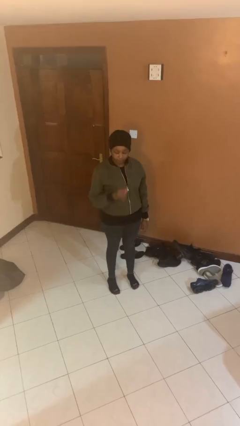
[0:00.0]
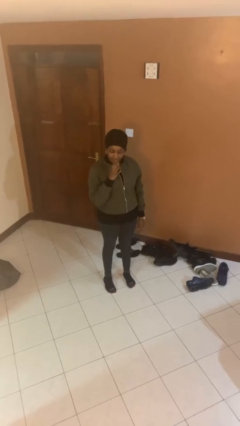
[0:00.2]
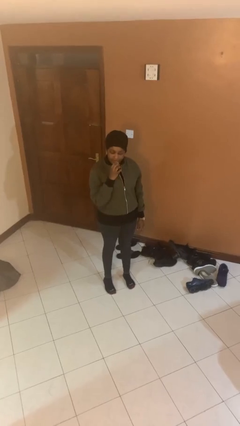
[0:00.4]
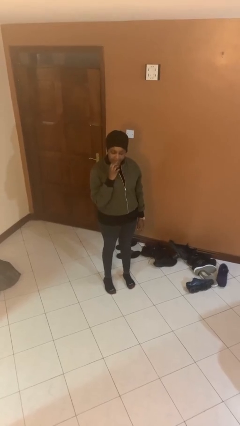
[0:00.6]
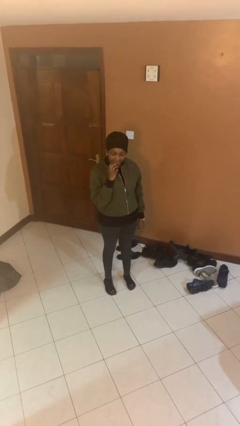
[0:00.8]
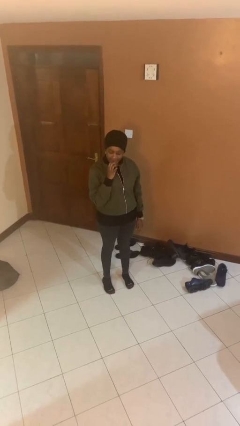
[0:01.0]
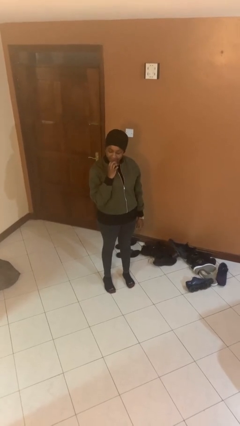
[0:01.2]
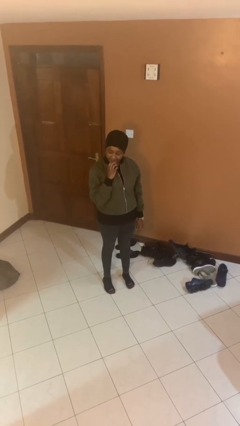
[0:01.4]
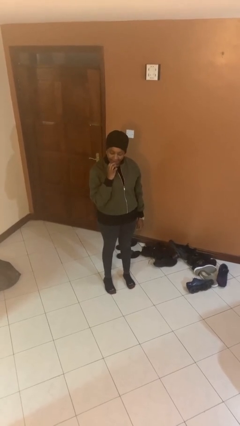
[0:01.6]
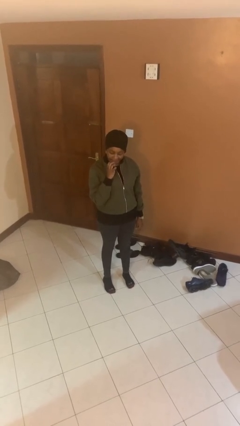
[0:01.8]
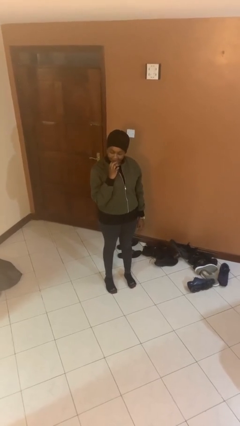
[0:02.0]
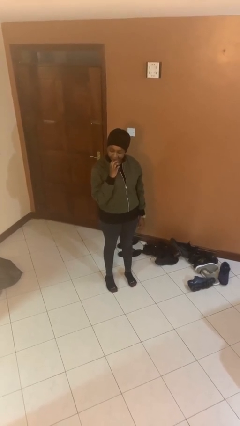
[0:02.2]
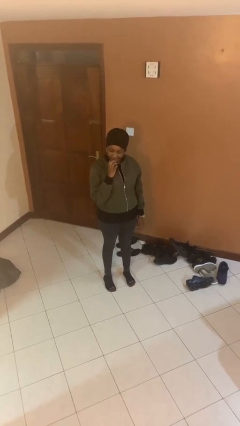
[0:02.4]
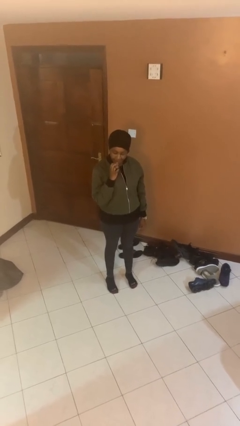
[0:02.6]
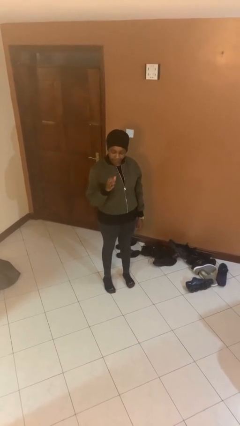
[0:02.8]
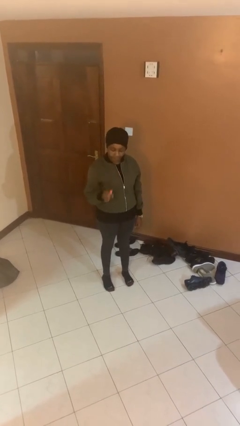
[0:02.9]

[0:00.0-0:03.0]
person applies lip makeup

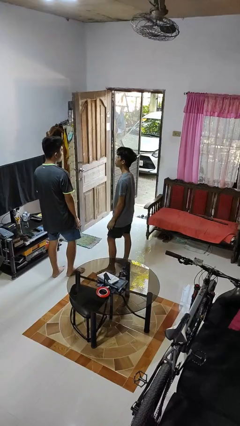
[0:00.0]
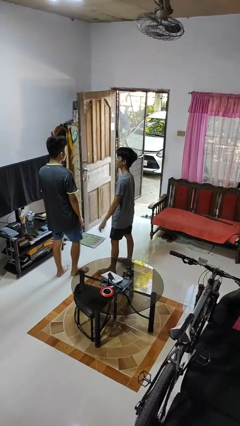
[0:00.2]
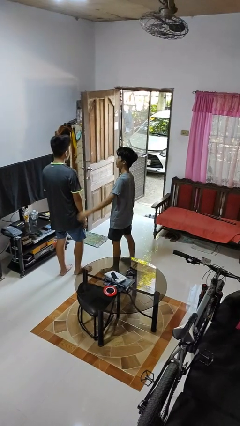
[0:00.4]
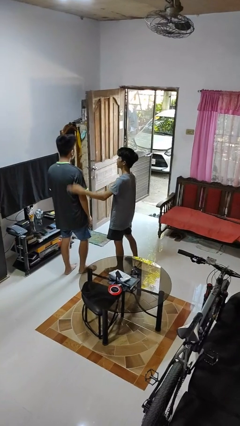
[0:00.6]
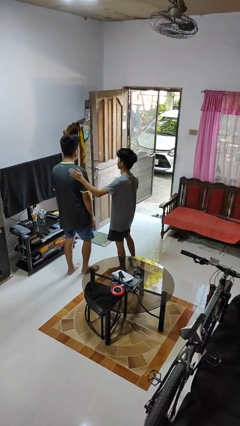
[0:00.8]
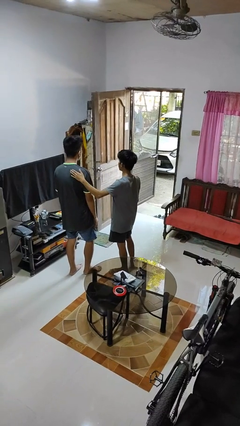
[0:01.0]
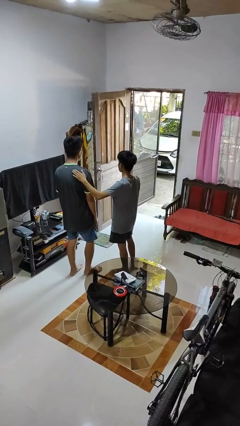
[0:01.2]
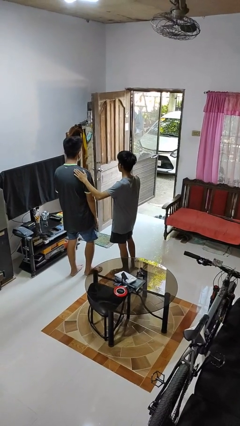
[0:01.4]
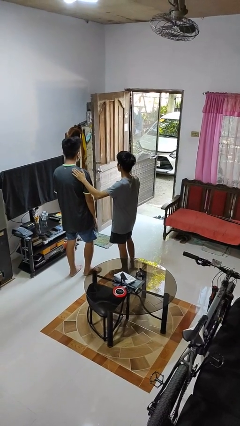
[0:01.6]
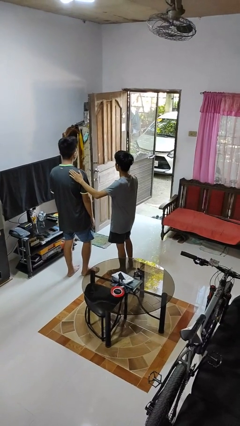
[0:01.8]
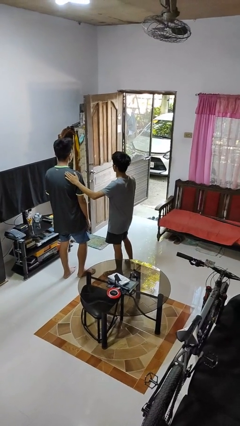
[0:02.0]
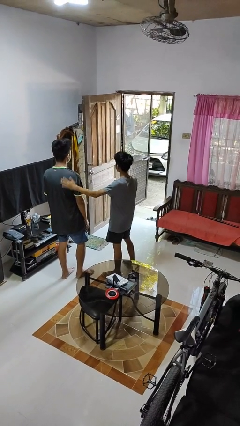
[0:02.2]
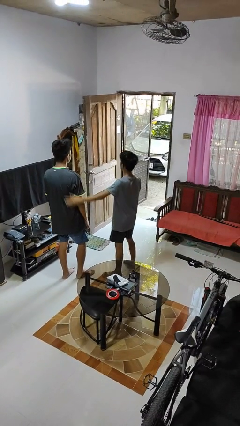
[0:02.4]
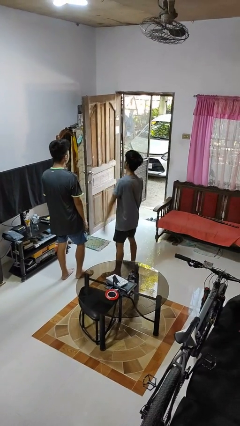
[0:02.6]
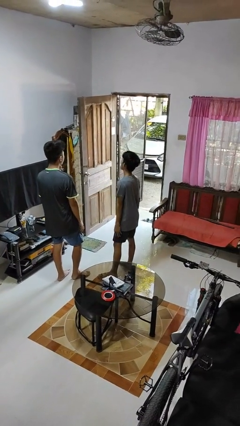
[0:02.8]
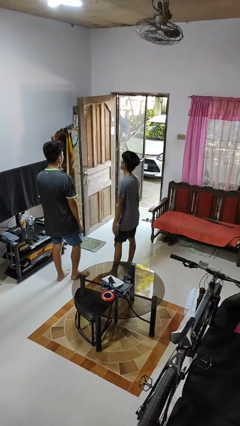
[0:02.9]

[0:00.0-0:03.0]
person touches back of person

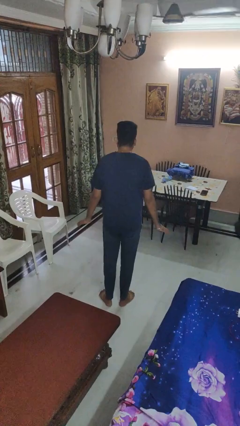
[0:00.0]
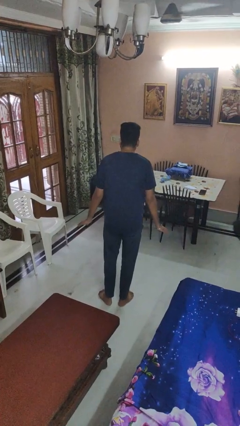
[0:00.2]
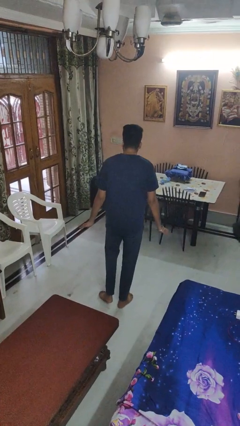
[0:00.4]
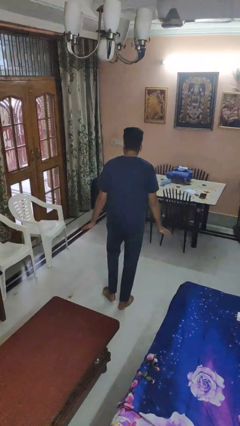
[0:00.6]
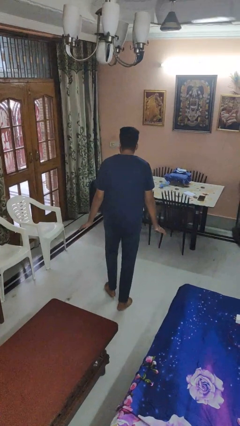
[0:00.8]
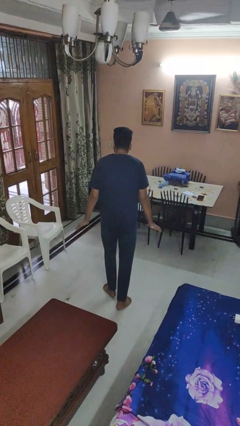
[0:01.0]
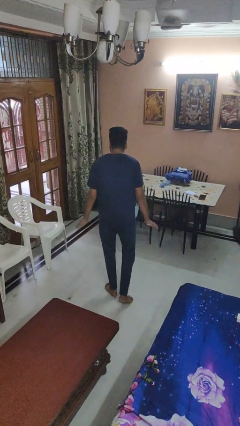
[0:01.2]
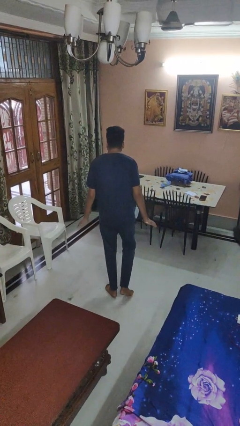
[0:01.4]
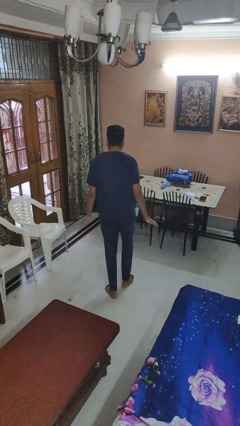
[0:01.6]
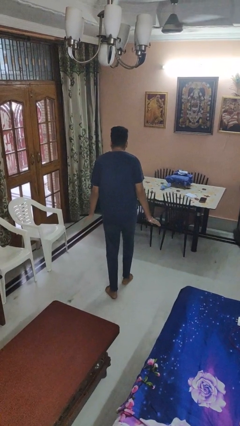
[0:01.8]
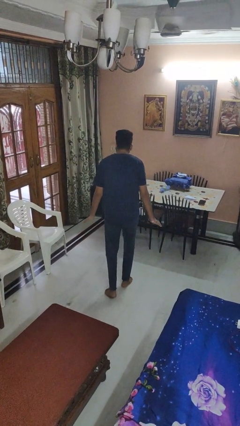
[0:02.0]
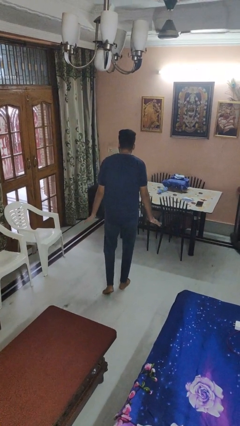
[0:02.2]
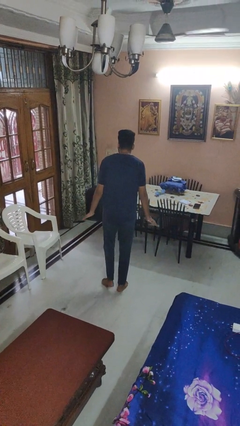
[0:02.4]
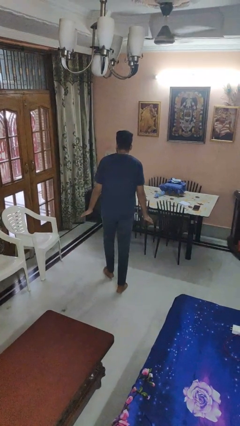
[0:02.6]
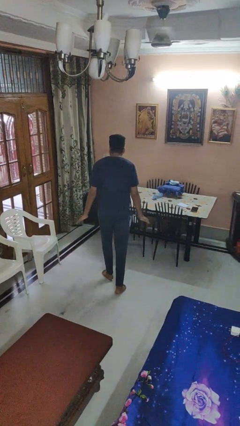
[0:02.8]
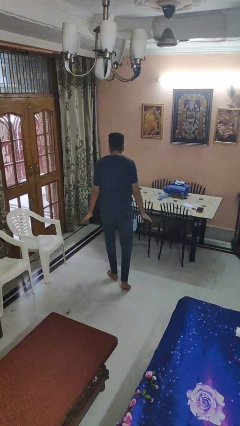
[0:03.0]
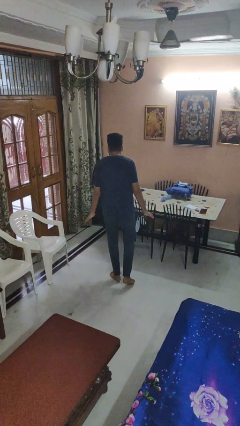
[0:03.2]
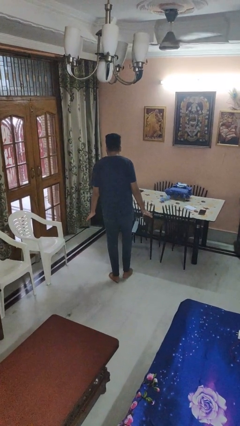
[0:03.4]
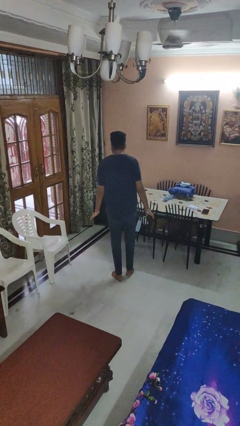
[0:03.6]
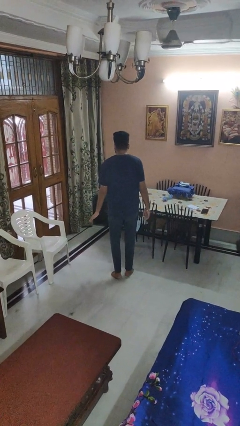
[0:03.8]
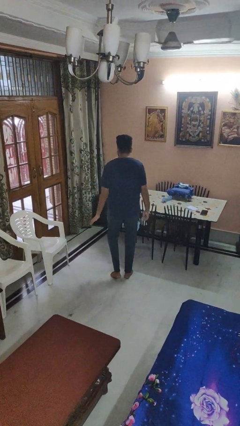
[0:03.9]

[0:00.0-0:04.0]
person walks tiptoe

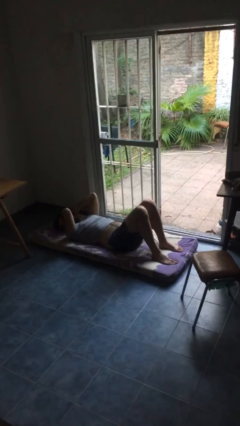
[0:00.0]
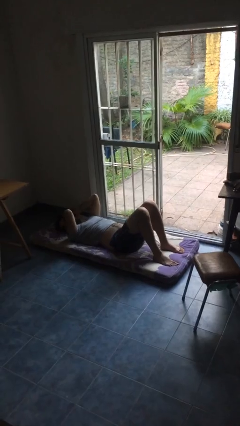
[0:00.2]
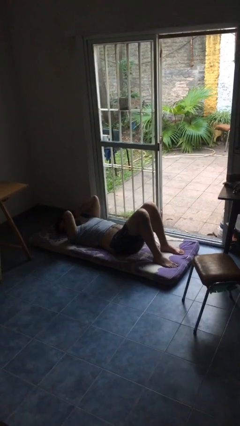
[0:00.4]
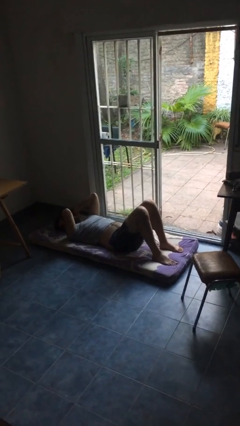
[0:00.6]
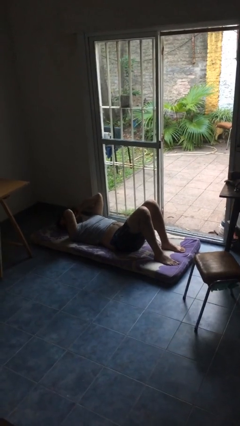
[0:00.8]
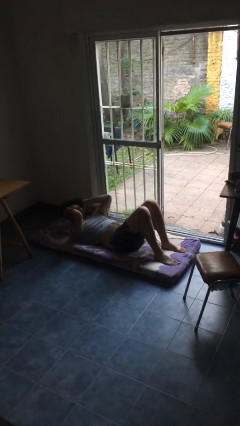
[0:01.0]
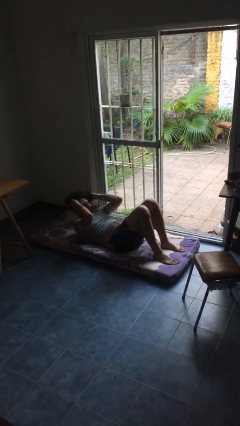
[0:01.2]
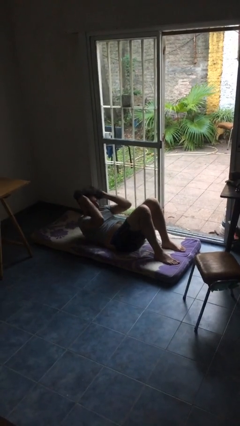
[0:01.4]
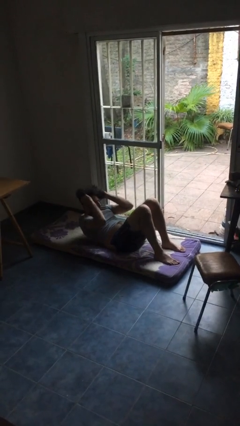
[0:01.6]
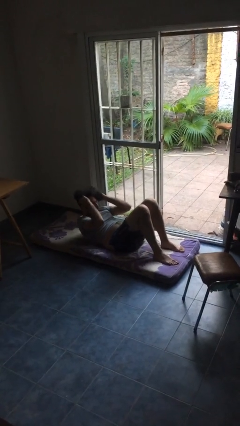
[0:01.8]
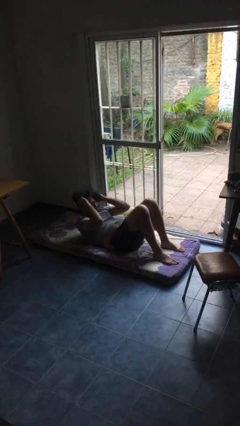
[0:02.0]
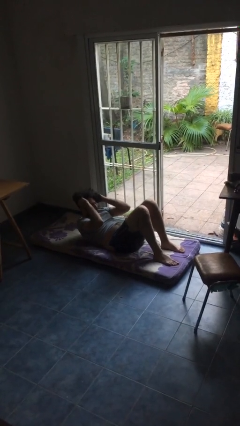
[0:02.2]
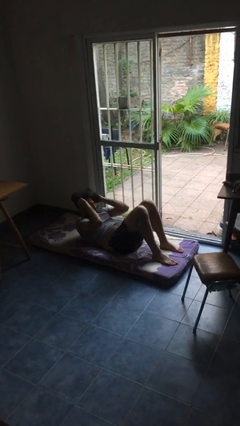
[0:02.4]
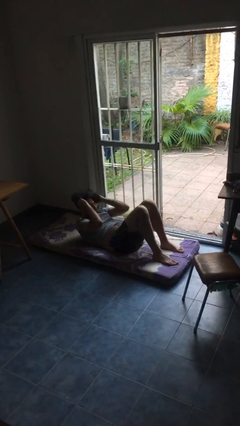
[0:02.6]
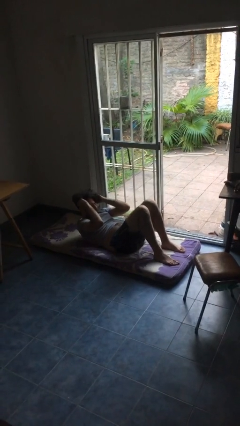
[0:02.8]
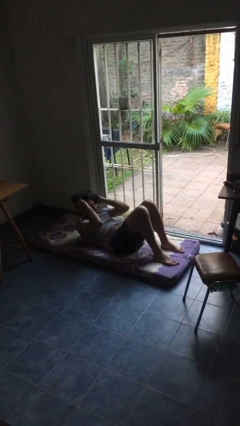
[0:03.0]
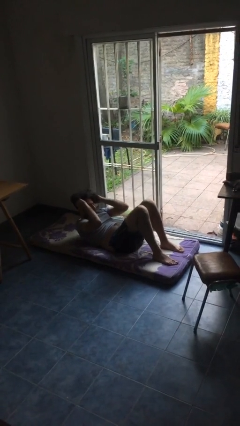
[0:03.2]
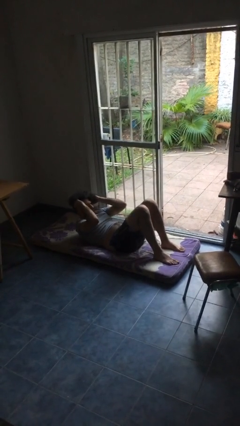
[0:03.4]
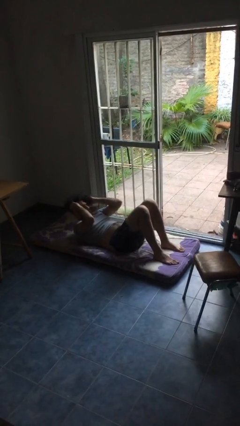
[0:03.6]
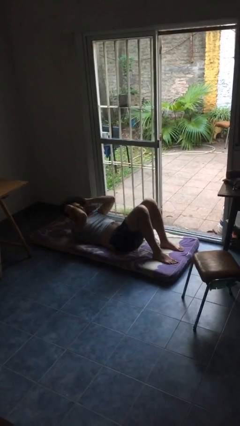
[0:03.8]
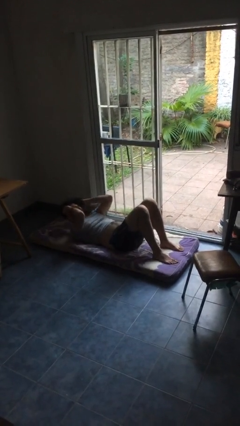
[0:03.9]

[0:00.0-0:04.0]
person exercises with situp

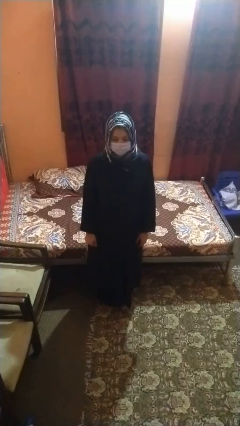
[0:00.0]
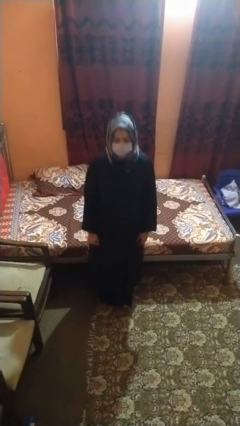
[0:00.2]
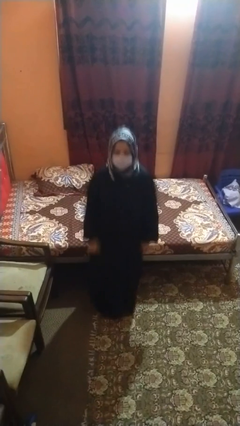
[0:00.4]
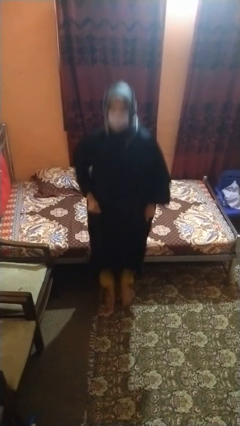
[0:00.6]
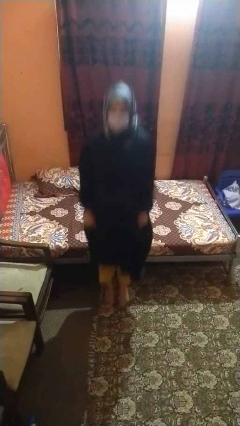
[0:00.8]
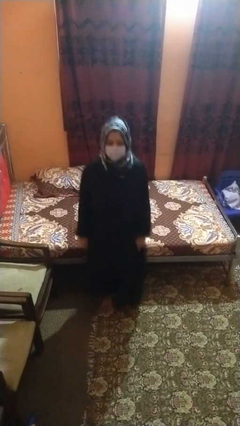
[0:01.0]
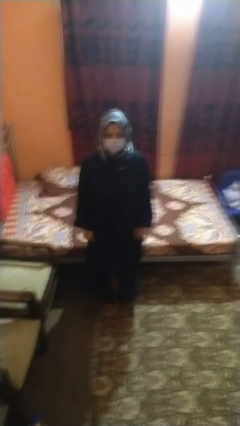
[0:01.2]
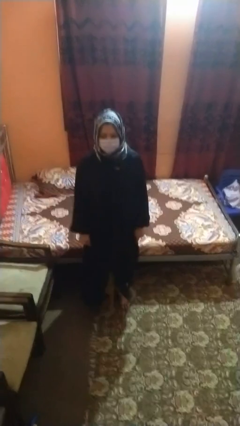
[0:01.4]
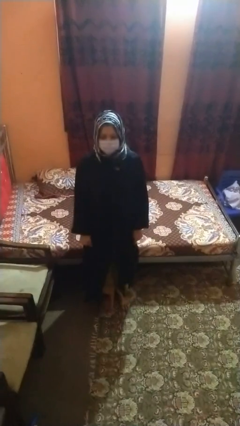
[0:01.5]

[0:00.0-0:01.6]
person jumps

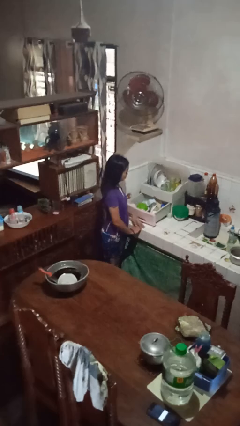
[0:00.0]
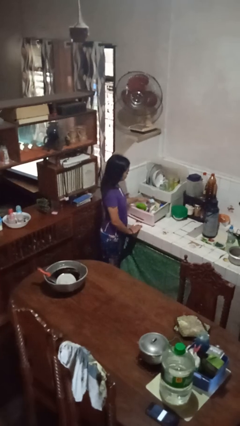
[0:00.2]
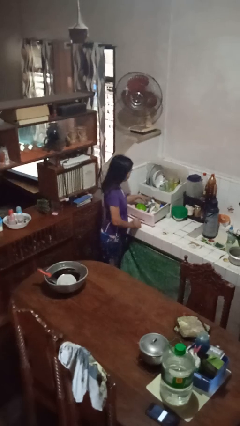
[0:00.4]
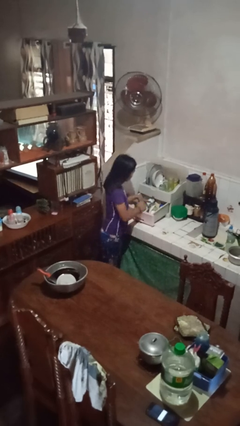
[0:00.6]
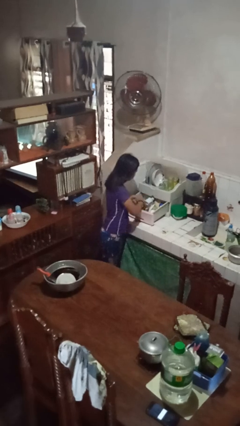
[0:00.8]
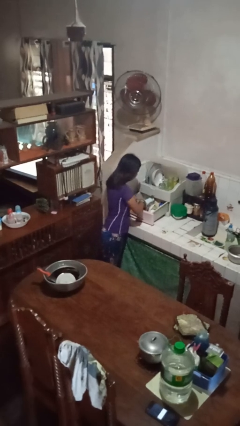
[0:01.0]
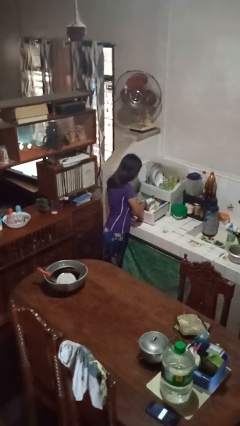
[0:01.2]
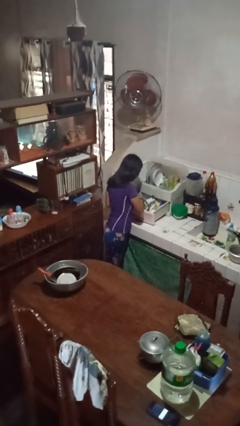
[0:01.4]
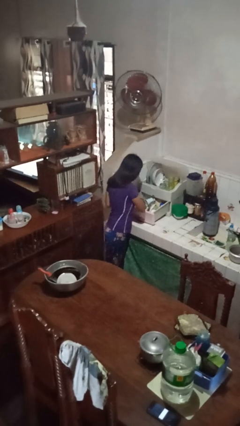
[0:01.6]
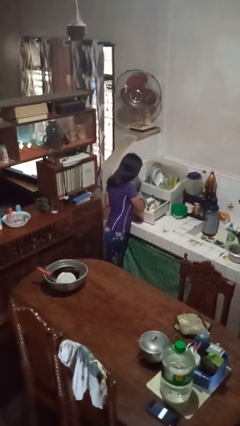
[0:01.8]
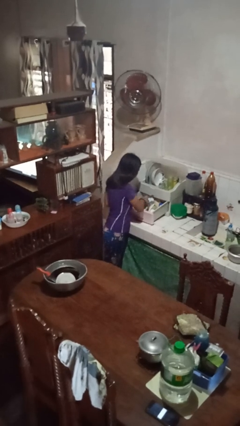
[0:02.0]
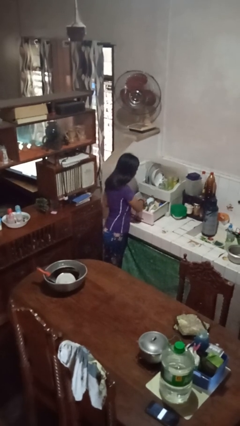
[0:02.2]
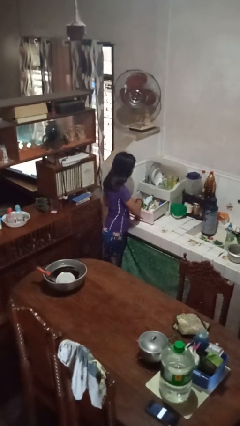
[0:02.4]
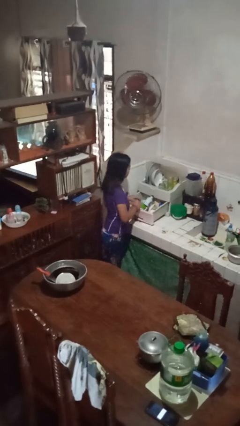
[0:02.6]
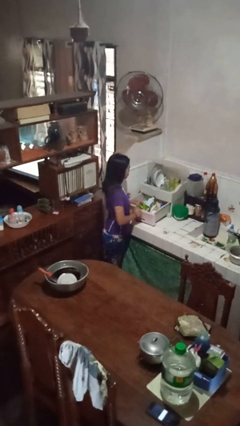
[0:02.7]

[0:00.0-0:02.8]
person searches in kitchen drawer
